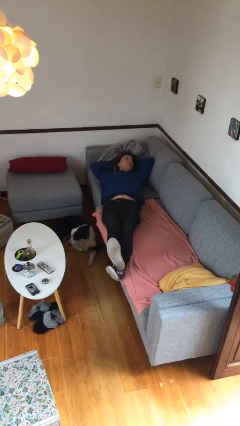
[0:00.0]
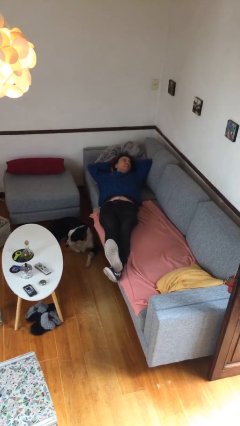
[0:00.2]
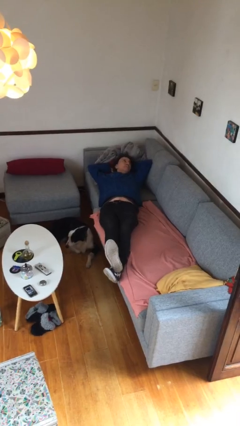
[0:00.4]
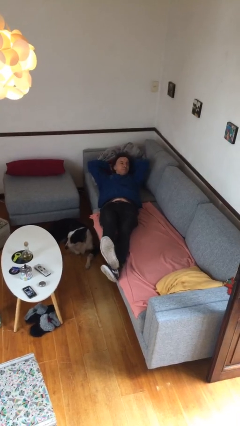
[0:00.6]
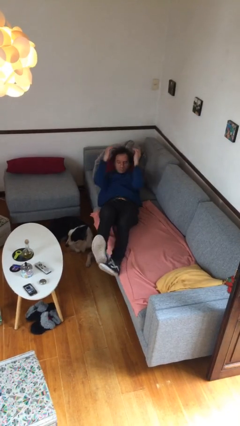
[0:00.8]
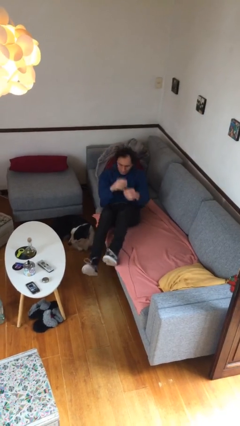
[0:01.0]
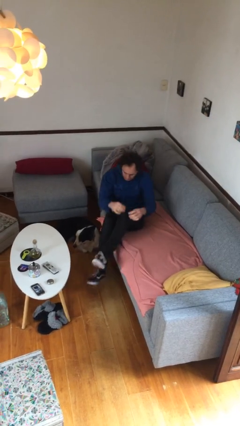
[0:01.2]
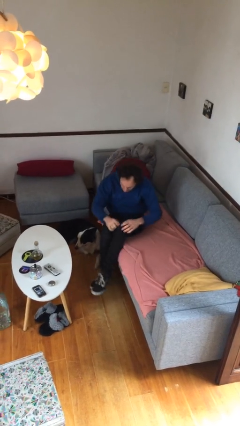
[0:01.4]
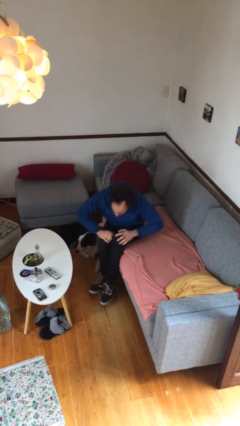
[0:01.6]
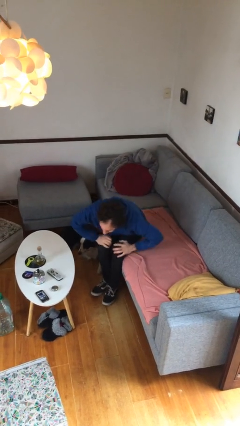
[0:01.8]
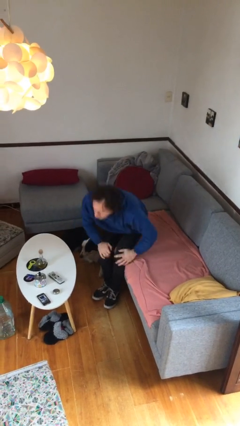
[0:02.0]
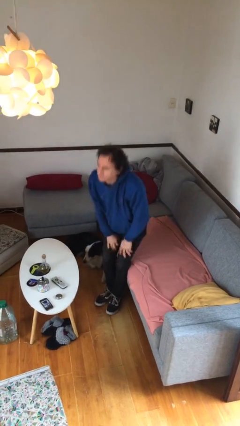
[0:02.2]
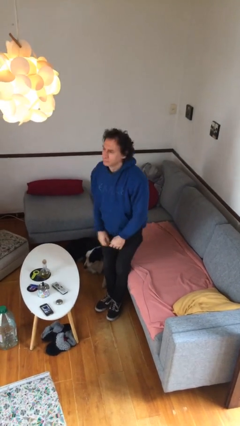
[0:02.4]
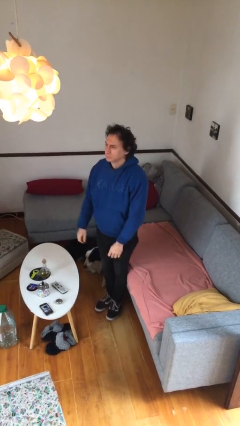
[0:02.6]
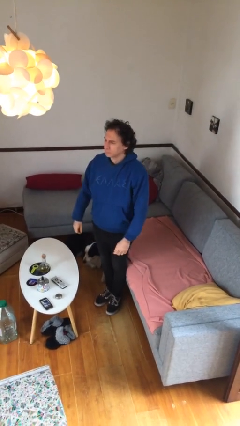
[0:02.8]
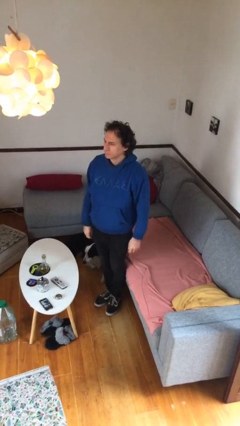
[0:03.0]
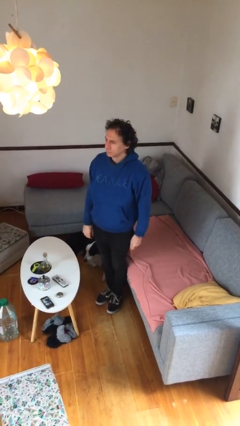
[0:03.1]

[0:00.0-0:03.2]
person stands up

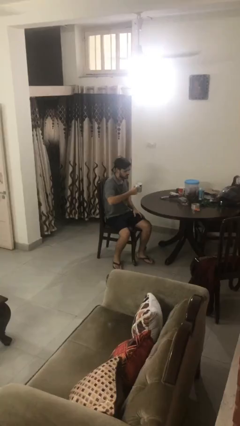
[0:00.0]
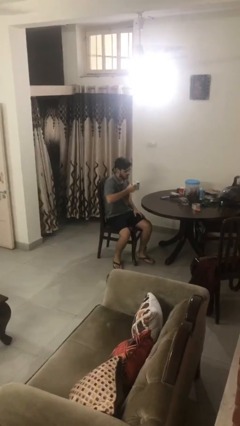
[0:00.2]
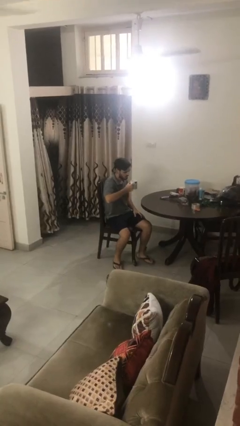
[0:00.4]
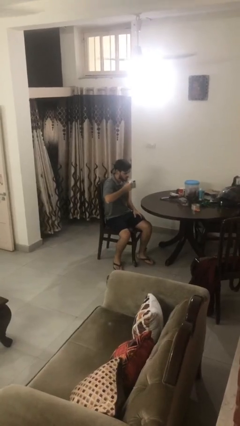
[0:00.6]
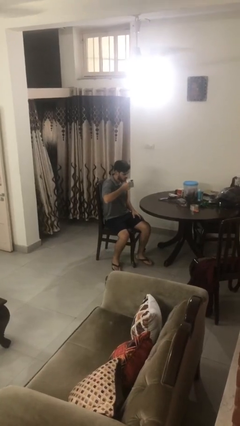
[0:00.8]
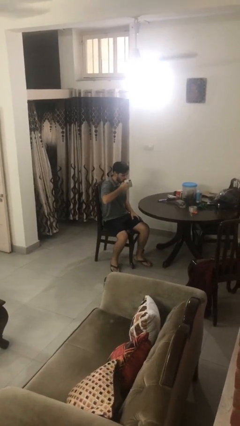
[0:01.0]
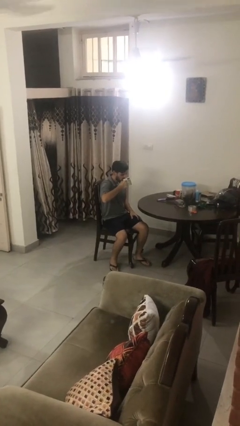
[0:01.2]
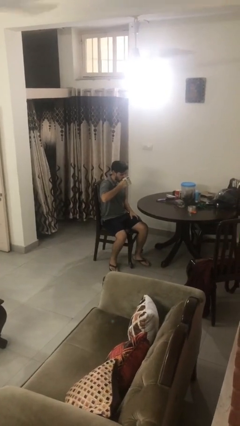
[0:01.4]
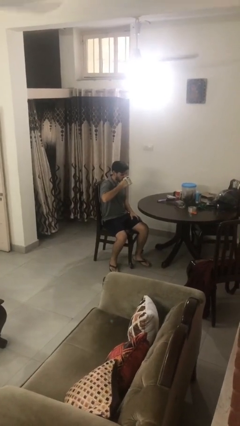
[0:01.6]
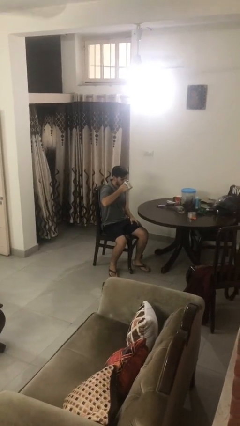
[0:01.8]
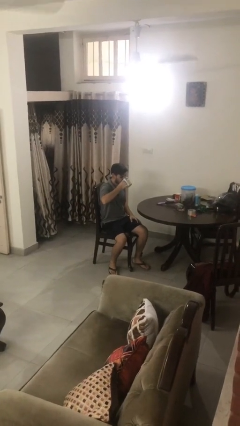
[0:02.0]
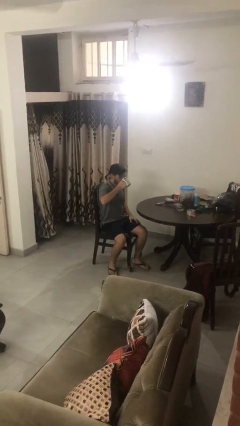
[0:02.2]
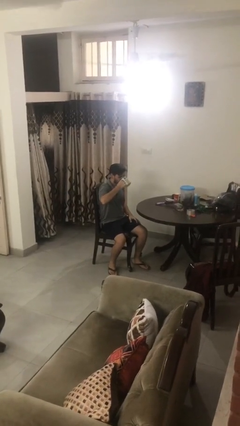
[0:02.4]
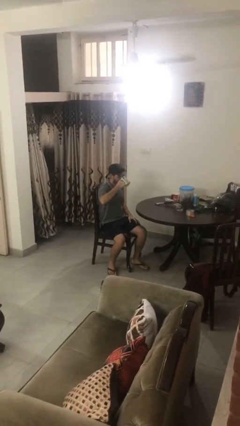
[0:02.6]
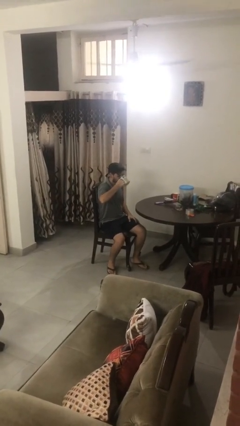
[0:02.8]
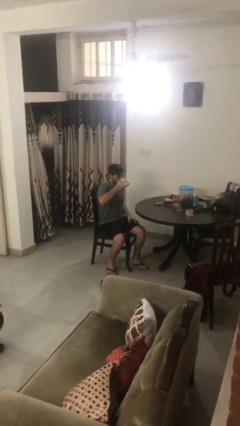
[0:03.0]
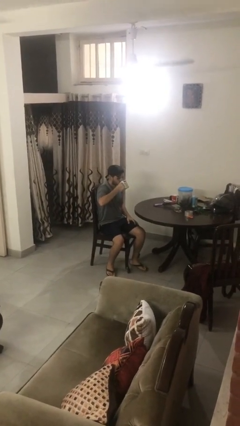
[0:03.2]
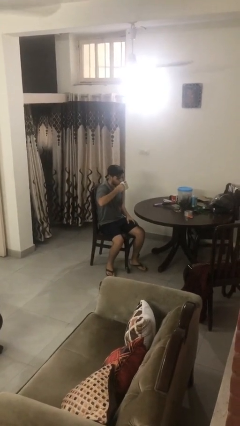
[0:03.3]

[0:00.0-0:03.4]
person drinks from mug

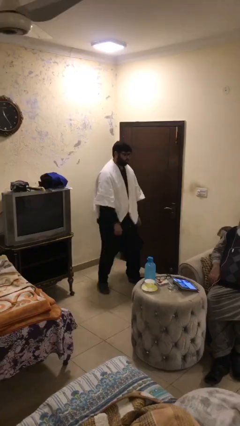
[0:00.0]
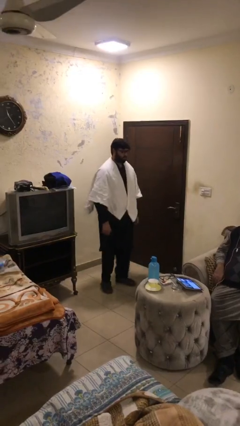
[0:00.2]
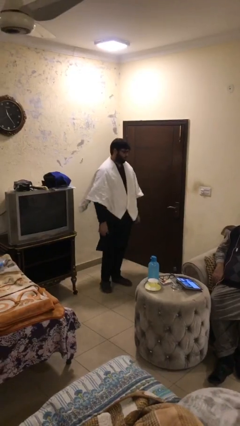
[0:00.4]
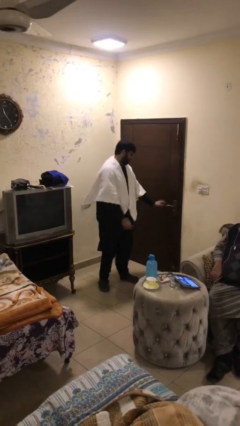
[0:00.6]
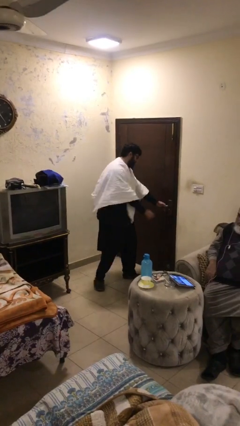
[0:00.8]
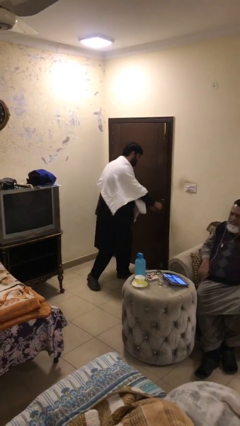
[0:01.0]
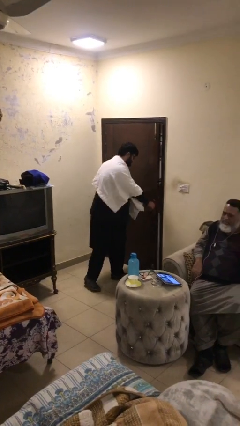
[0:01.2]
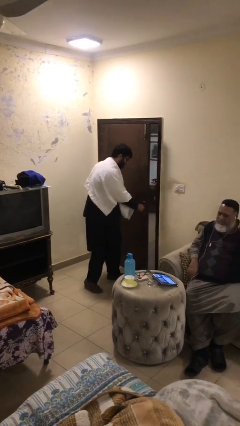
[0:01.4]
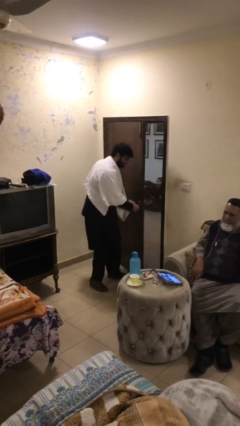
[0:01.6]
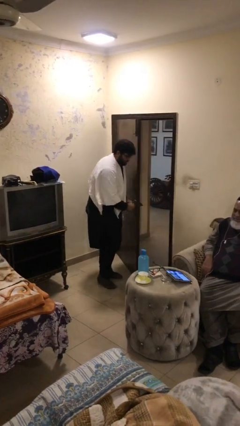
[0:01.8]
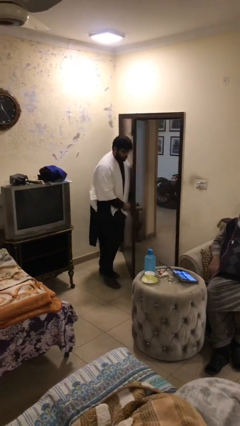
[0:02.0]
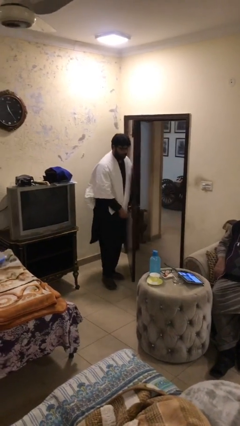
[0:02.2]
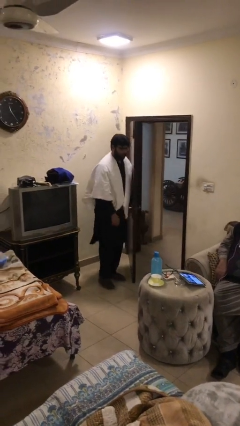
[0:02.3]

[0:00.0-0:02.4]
person opens facility door

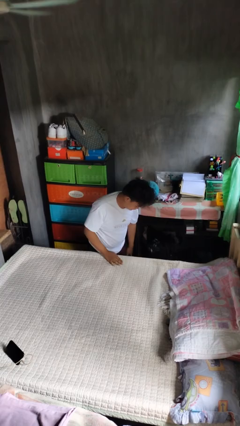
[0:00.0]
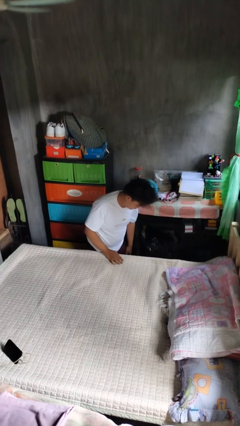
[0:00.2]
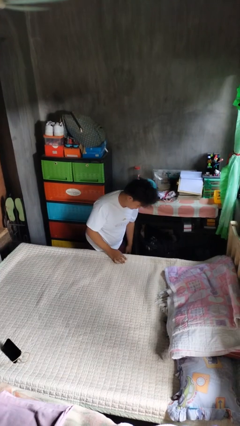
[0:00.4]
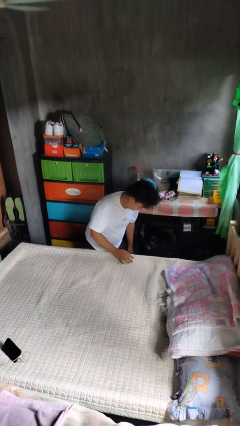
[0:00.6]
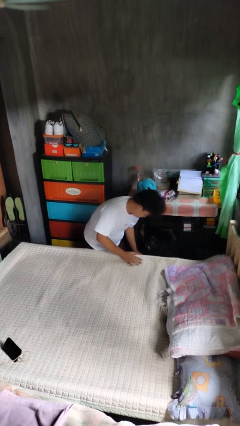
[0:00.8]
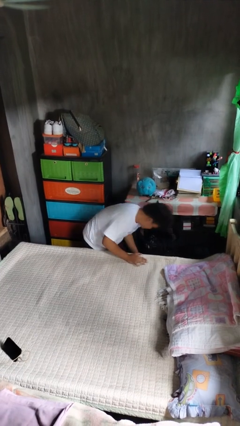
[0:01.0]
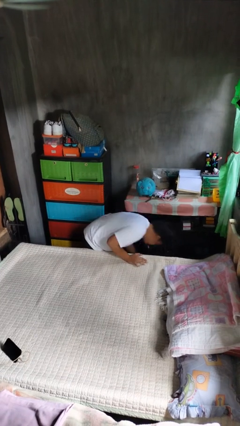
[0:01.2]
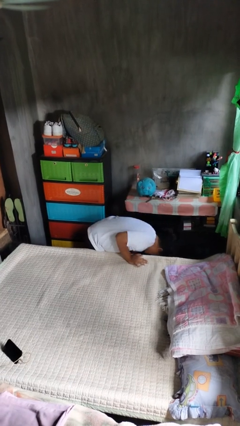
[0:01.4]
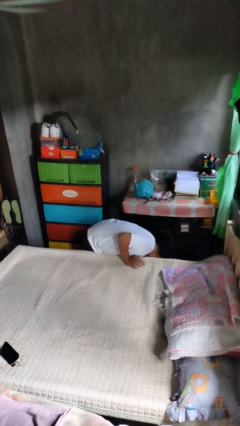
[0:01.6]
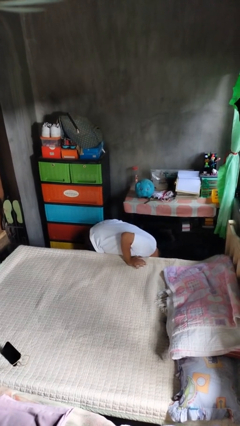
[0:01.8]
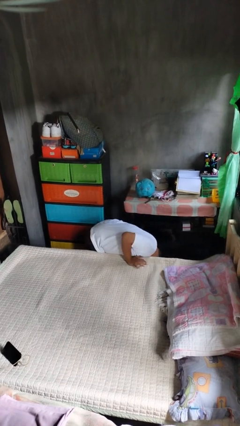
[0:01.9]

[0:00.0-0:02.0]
person searches under bed

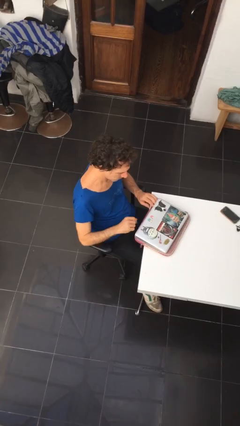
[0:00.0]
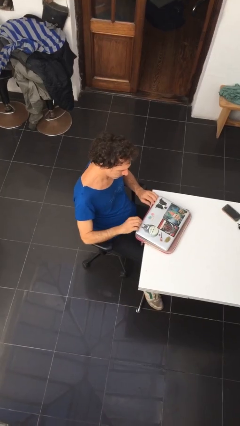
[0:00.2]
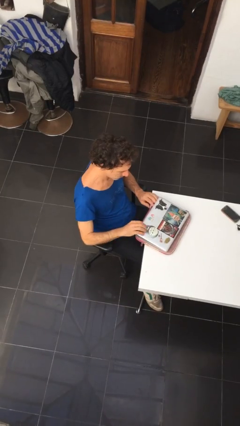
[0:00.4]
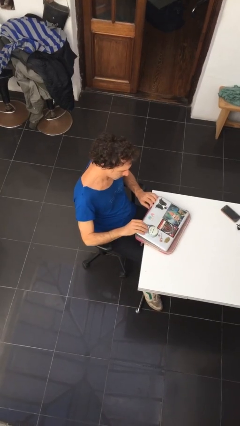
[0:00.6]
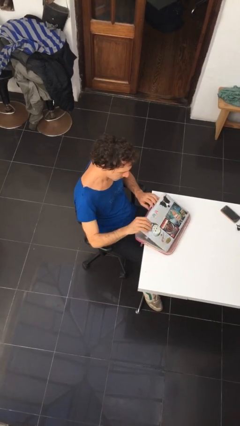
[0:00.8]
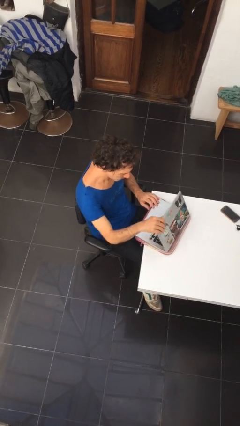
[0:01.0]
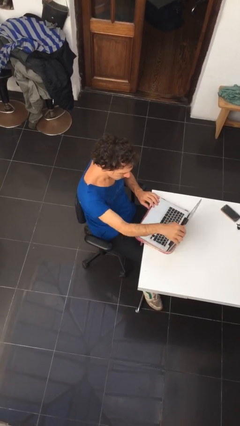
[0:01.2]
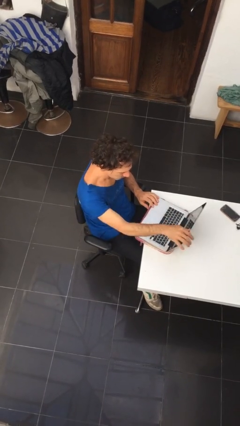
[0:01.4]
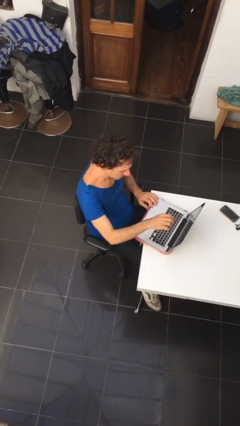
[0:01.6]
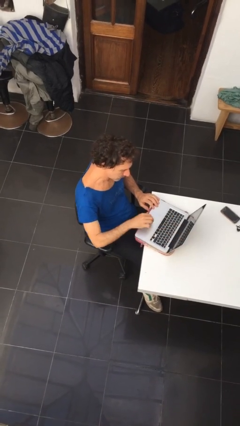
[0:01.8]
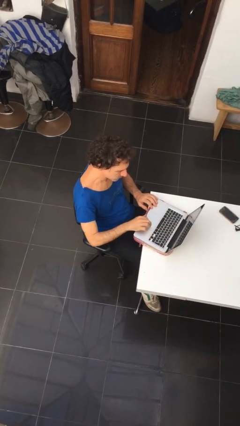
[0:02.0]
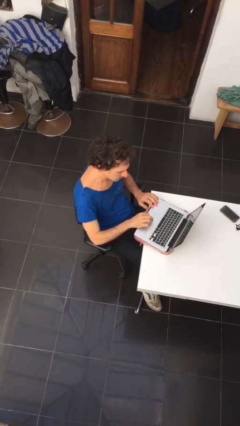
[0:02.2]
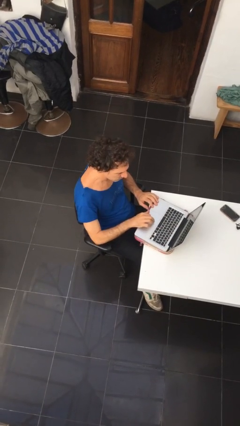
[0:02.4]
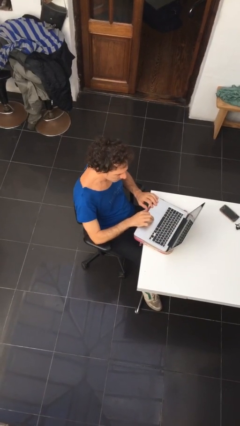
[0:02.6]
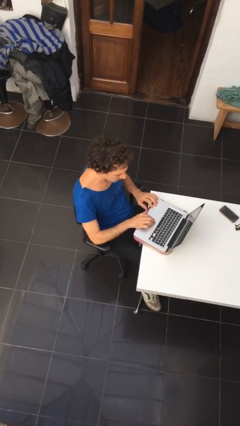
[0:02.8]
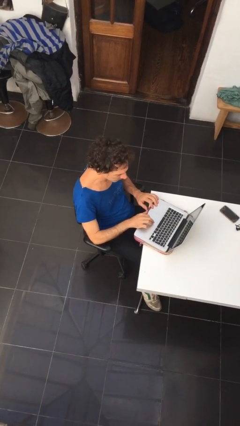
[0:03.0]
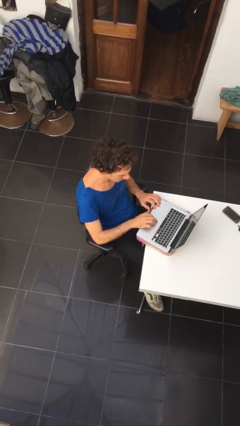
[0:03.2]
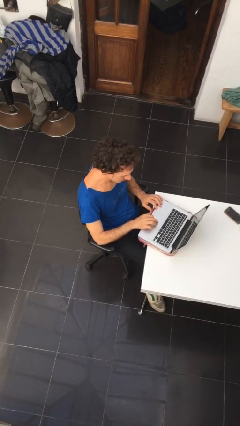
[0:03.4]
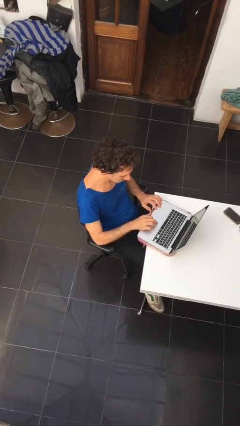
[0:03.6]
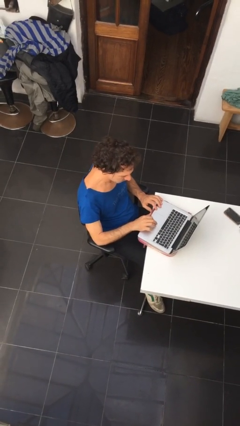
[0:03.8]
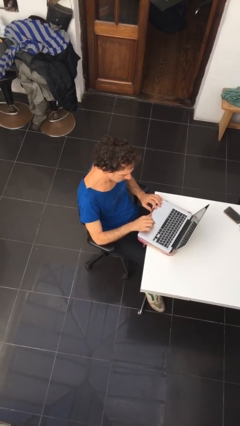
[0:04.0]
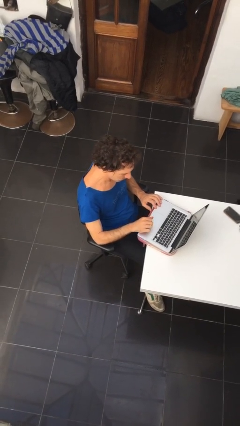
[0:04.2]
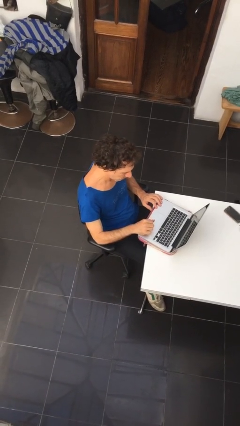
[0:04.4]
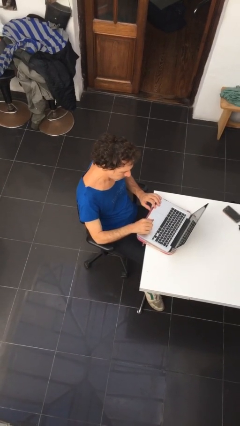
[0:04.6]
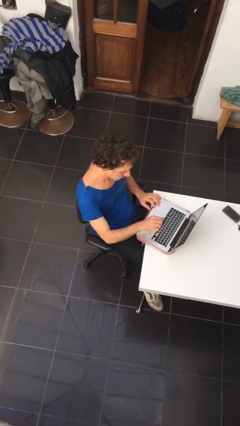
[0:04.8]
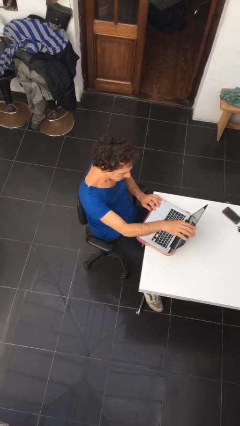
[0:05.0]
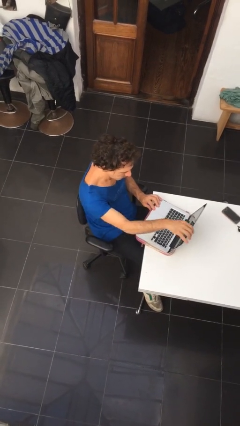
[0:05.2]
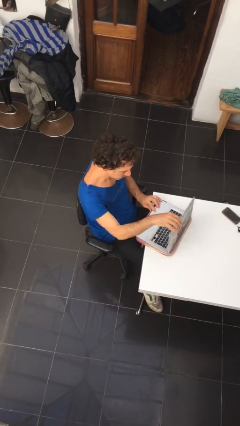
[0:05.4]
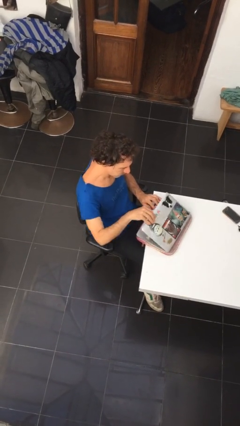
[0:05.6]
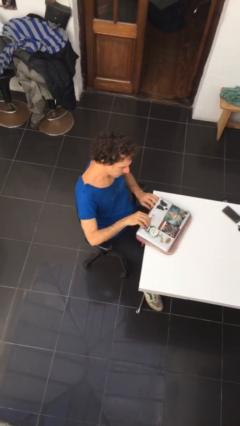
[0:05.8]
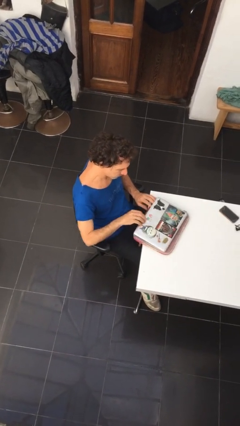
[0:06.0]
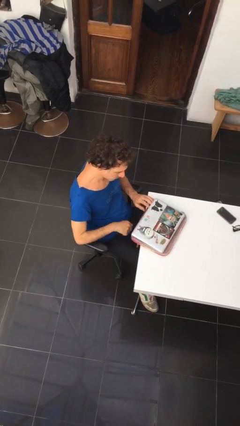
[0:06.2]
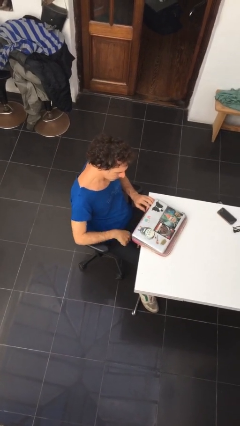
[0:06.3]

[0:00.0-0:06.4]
person interacts with laptop

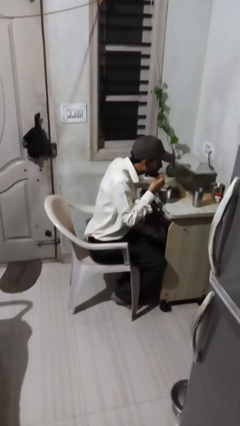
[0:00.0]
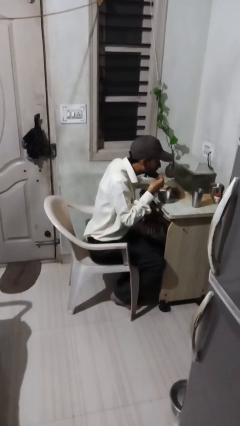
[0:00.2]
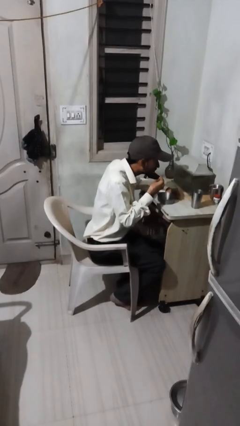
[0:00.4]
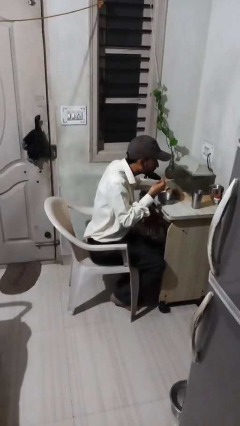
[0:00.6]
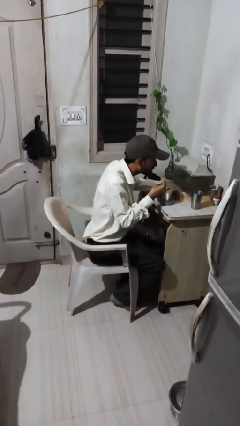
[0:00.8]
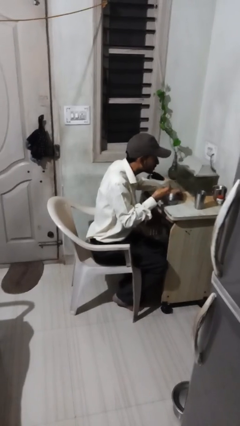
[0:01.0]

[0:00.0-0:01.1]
person eats with hands
